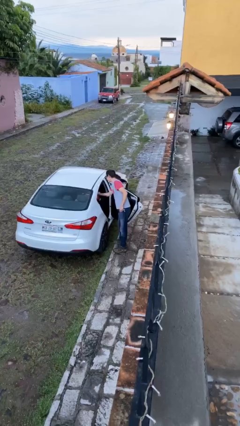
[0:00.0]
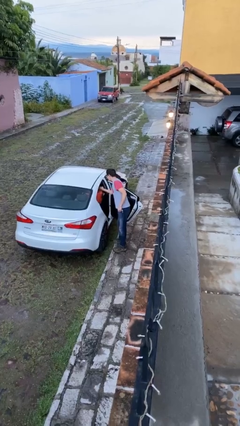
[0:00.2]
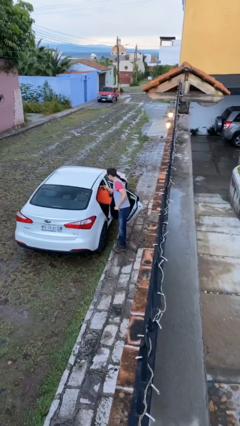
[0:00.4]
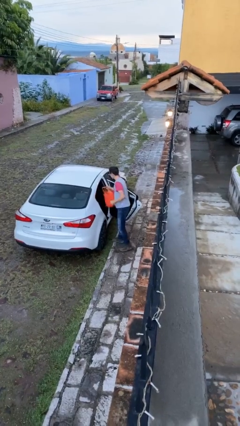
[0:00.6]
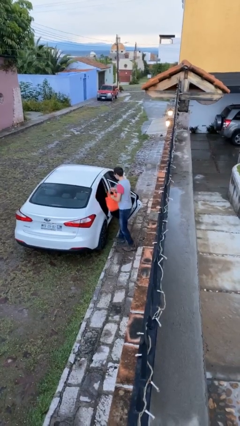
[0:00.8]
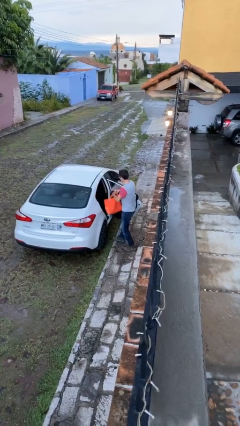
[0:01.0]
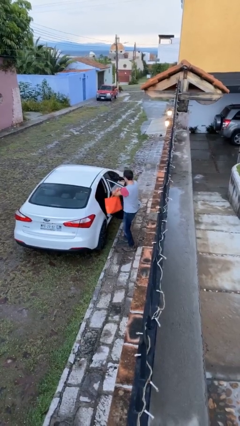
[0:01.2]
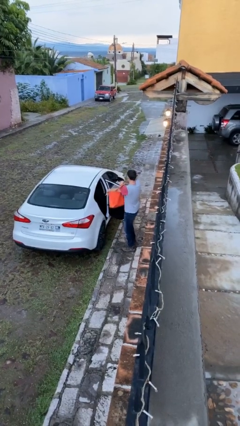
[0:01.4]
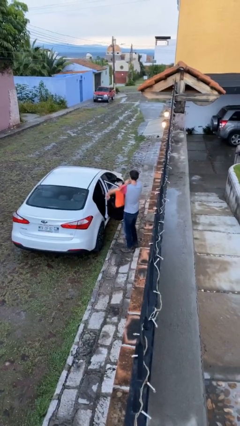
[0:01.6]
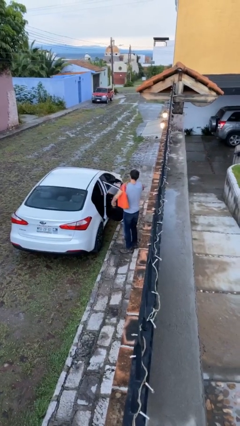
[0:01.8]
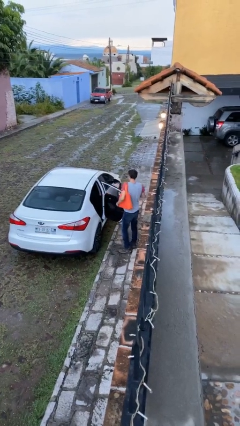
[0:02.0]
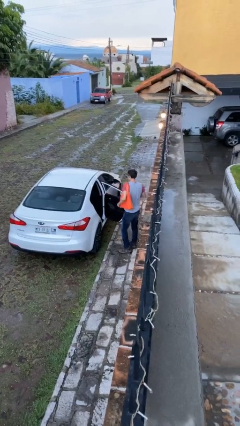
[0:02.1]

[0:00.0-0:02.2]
person unloads car

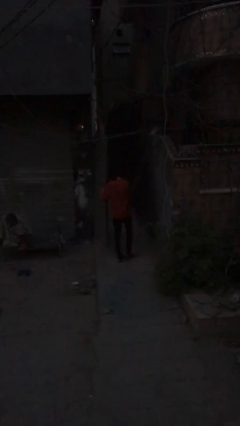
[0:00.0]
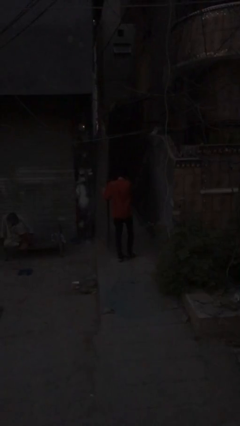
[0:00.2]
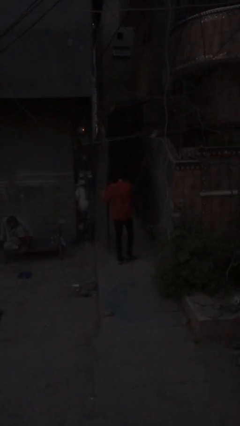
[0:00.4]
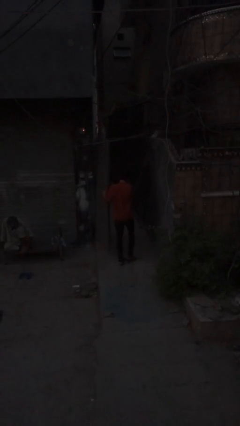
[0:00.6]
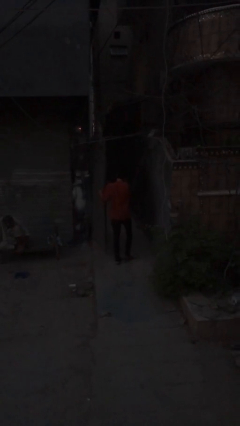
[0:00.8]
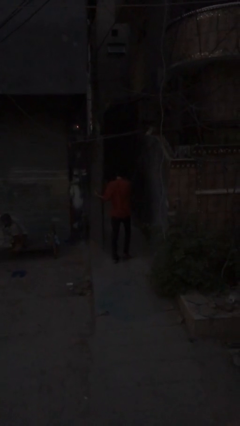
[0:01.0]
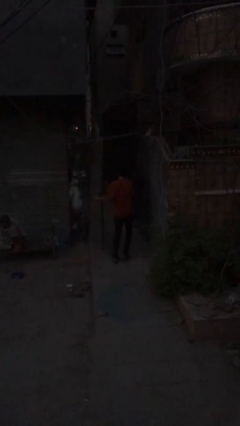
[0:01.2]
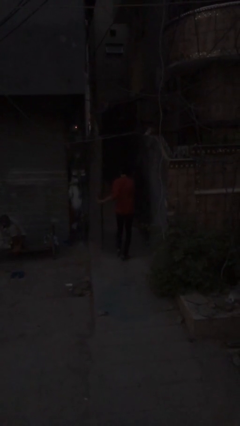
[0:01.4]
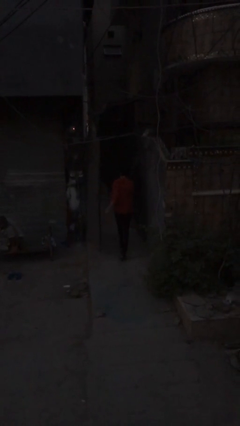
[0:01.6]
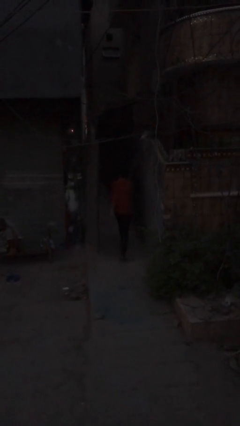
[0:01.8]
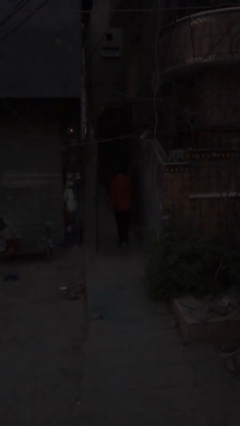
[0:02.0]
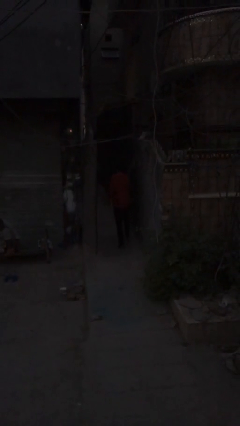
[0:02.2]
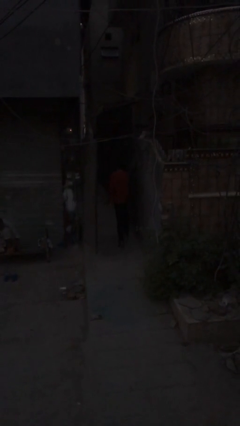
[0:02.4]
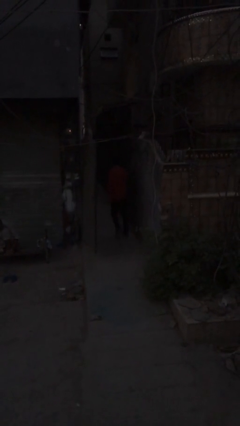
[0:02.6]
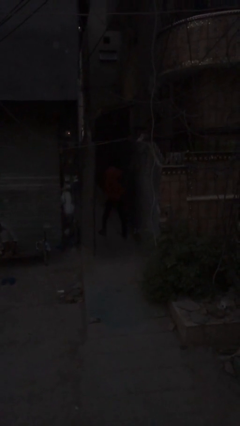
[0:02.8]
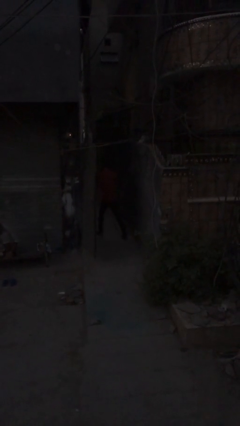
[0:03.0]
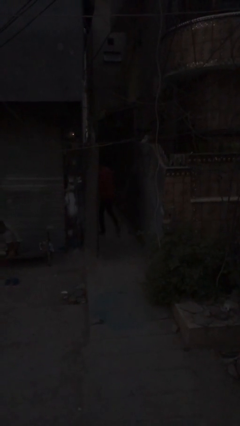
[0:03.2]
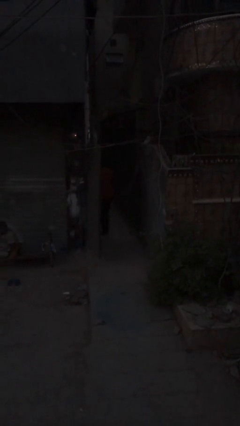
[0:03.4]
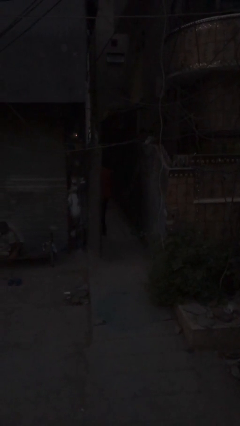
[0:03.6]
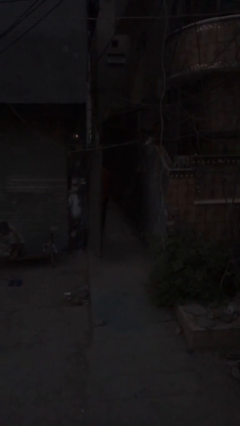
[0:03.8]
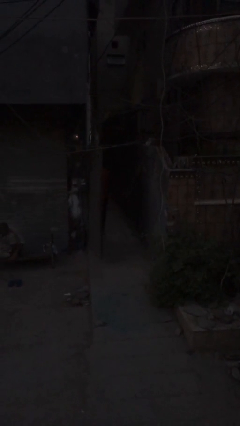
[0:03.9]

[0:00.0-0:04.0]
person exits scene through structure

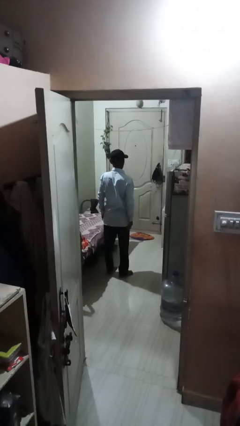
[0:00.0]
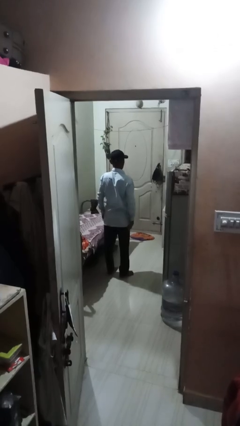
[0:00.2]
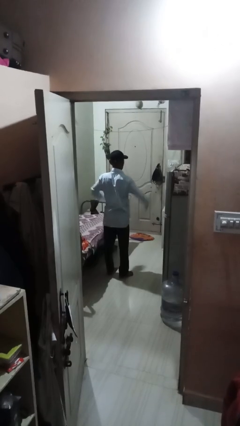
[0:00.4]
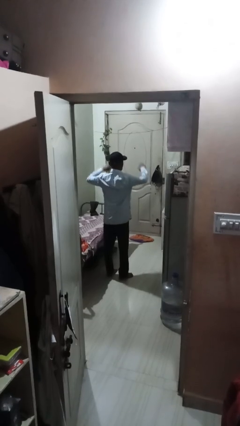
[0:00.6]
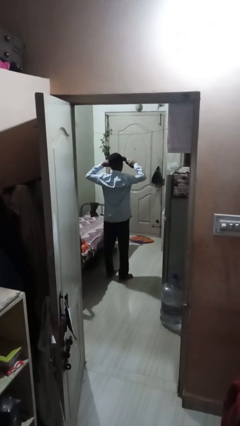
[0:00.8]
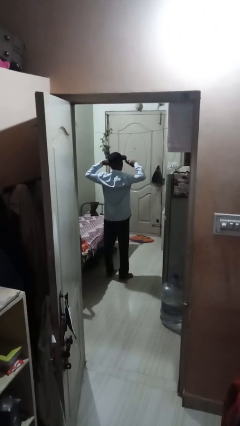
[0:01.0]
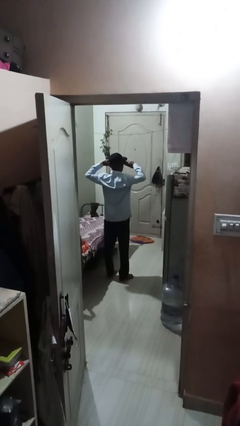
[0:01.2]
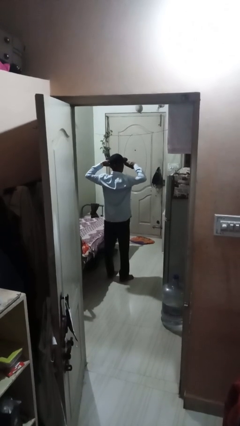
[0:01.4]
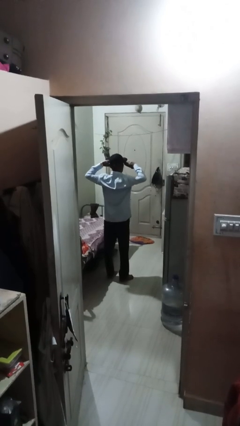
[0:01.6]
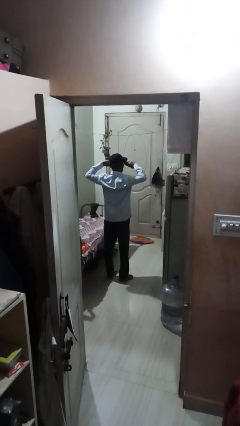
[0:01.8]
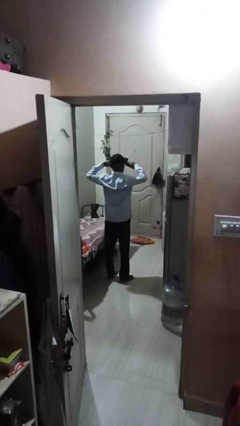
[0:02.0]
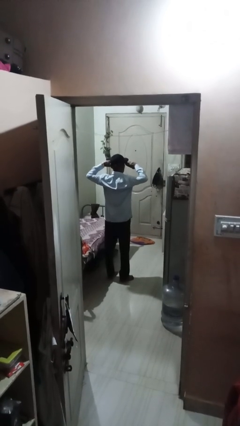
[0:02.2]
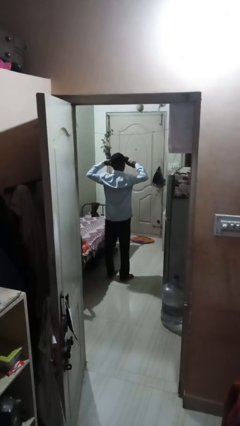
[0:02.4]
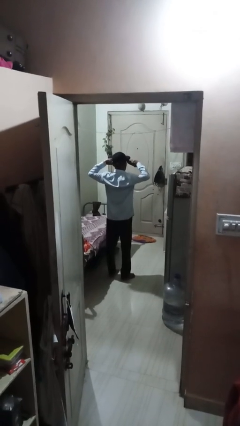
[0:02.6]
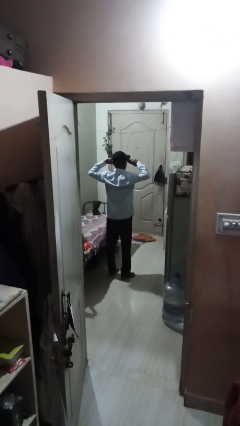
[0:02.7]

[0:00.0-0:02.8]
person salutes

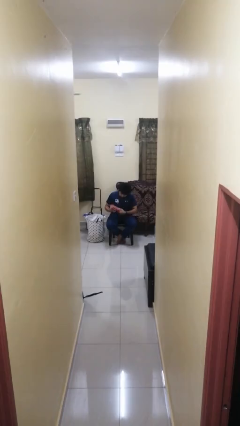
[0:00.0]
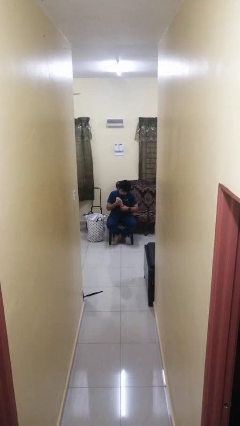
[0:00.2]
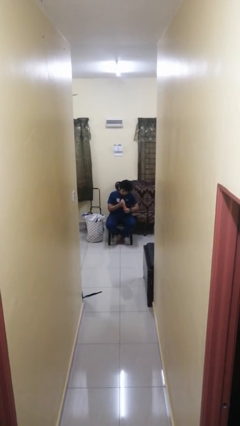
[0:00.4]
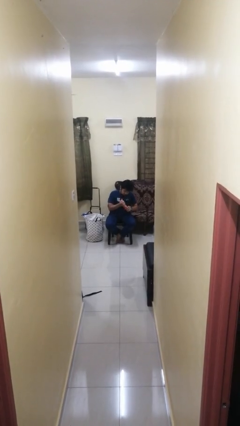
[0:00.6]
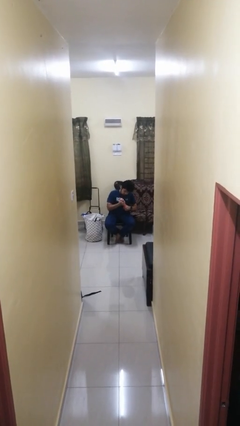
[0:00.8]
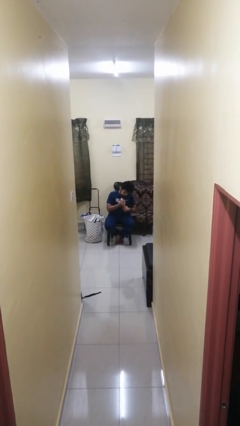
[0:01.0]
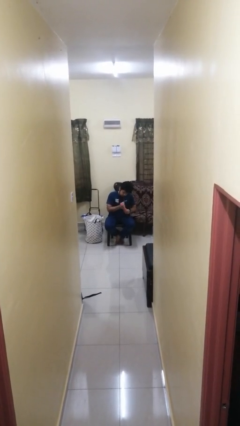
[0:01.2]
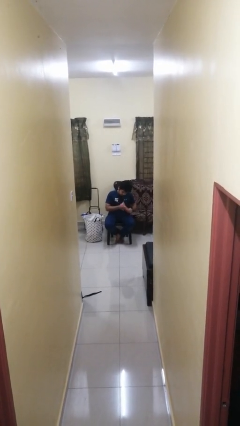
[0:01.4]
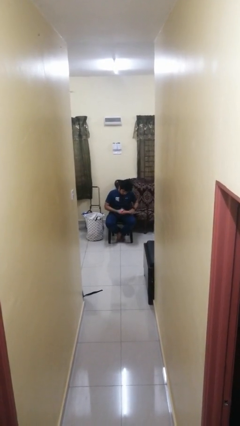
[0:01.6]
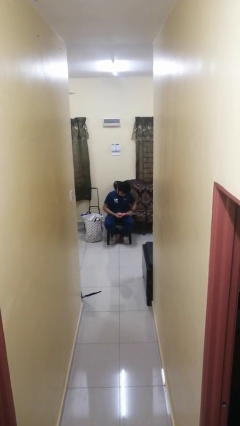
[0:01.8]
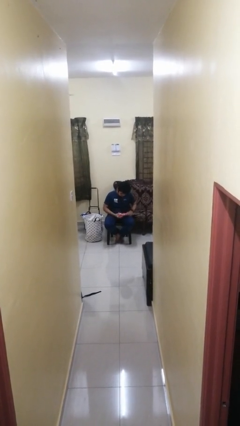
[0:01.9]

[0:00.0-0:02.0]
person squeezes object

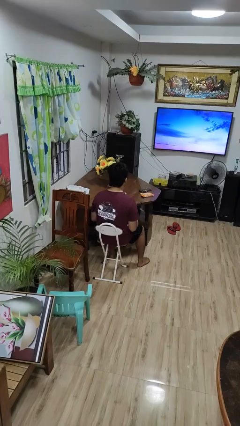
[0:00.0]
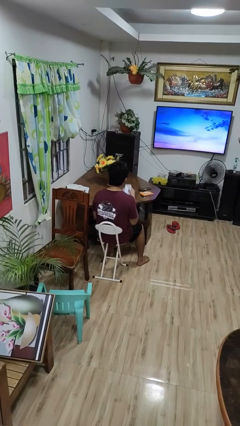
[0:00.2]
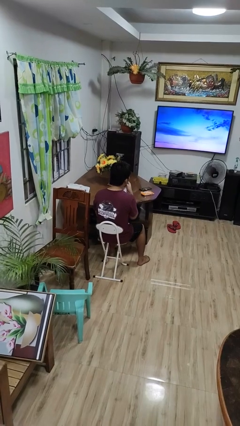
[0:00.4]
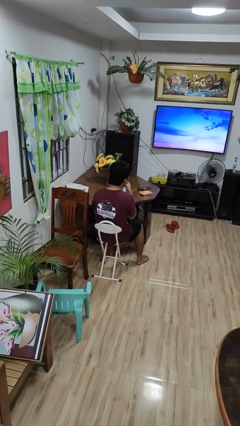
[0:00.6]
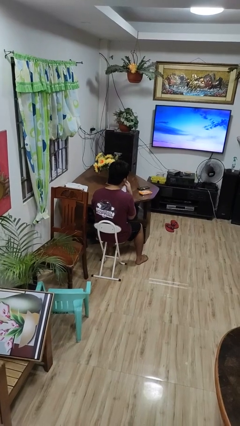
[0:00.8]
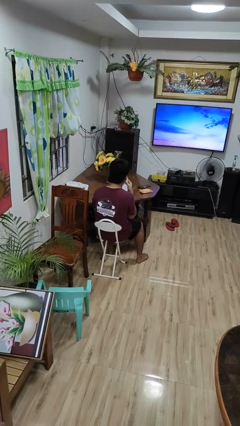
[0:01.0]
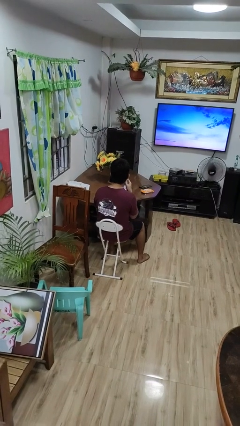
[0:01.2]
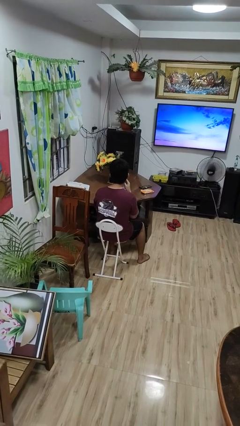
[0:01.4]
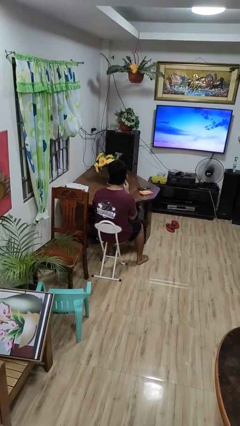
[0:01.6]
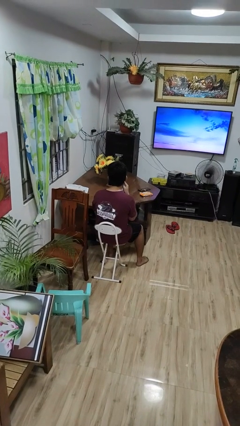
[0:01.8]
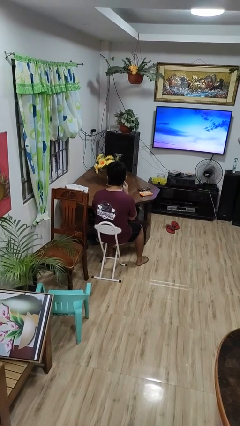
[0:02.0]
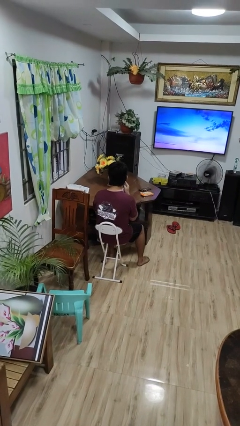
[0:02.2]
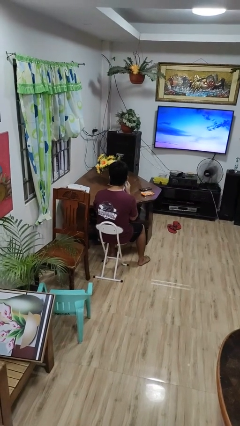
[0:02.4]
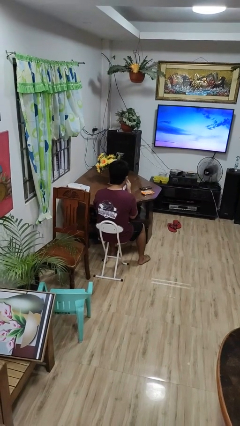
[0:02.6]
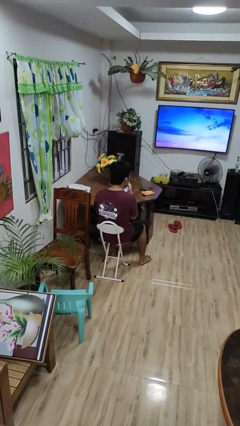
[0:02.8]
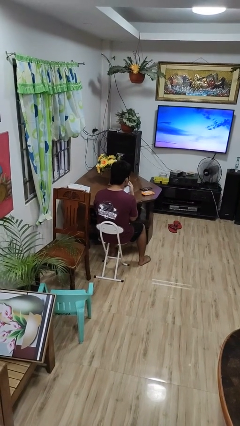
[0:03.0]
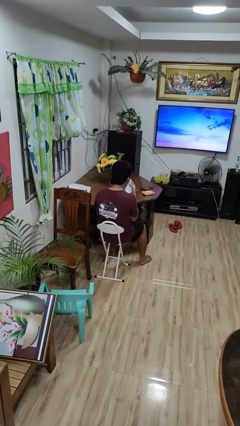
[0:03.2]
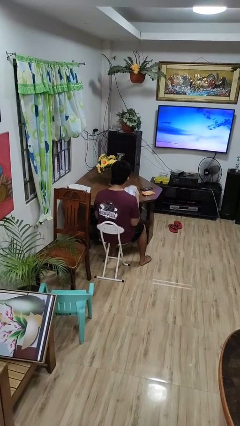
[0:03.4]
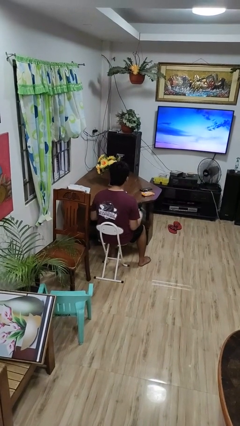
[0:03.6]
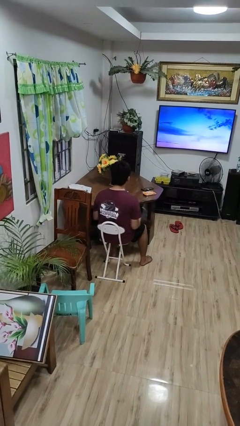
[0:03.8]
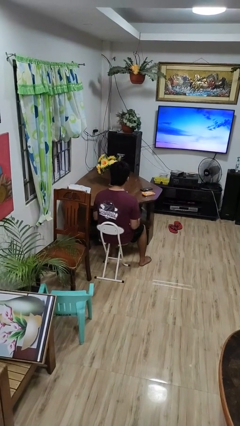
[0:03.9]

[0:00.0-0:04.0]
person wipes mouth with napkin

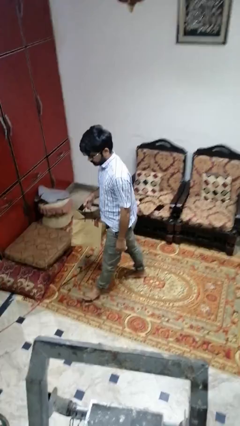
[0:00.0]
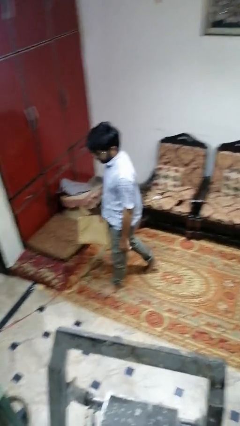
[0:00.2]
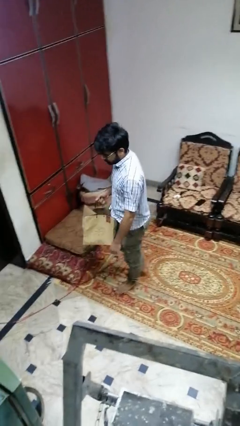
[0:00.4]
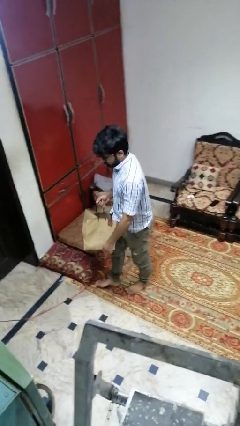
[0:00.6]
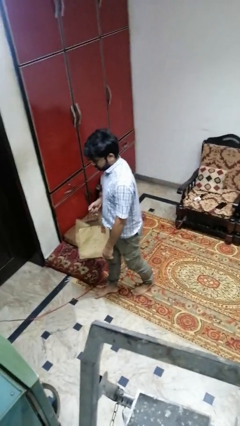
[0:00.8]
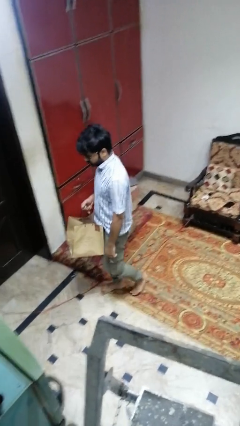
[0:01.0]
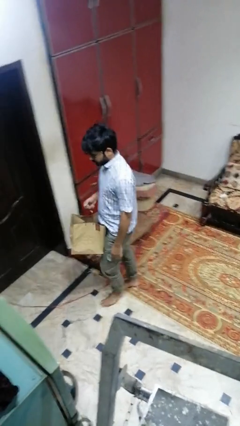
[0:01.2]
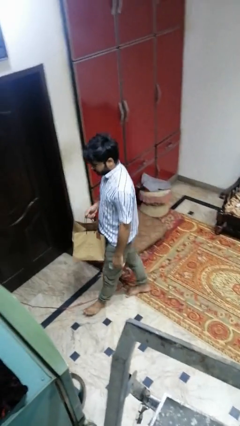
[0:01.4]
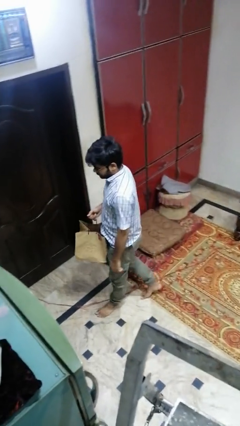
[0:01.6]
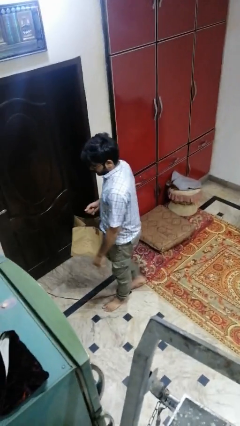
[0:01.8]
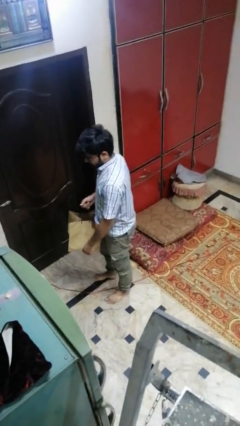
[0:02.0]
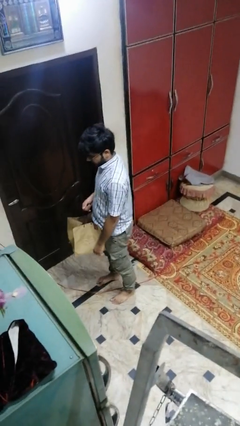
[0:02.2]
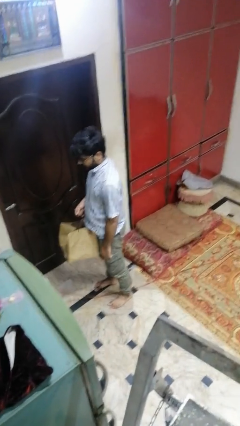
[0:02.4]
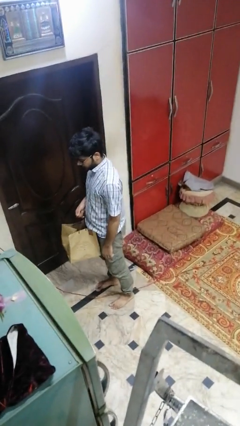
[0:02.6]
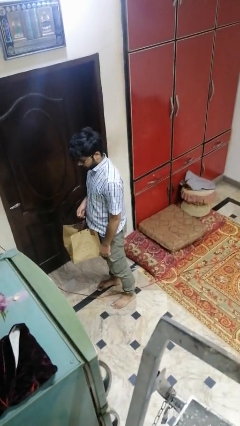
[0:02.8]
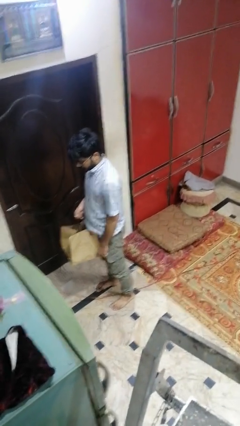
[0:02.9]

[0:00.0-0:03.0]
person carries groceries
